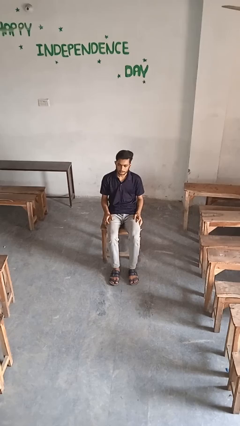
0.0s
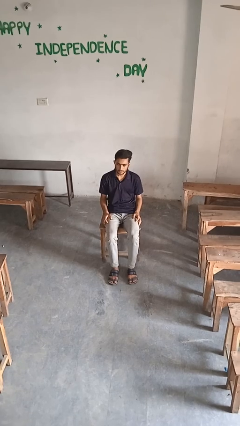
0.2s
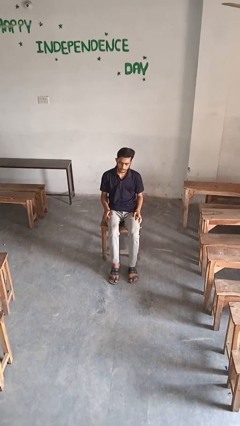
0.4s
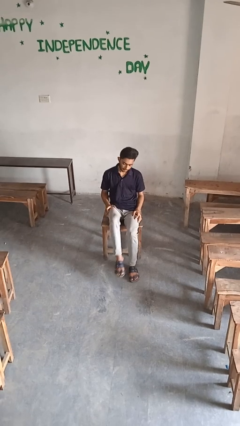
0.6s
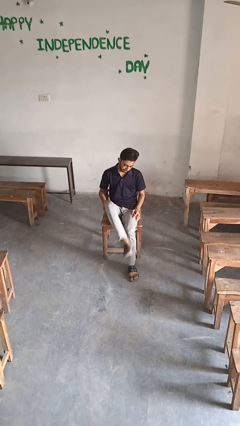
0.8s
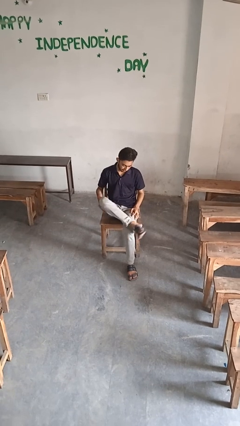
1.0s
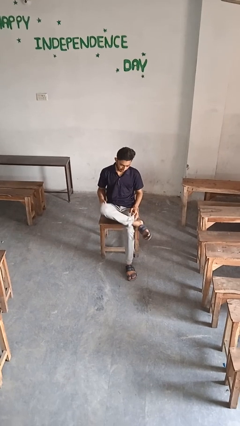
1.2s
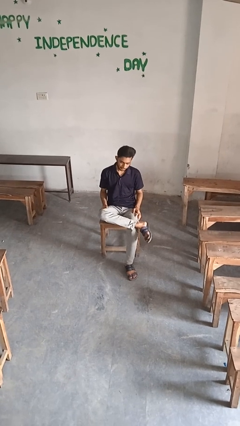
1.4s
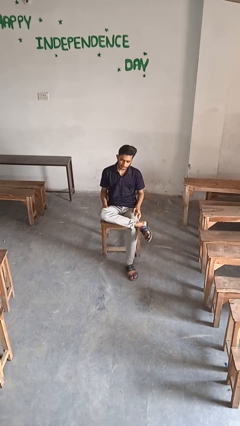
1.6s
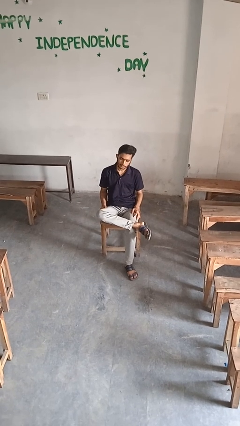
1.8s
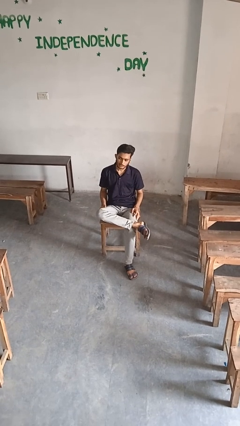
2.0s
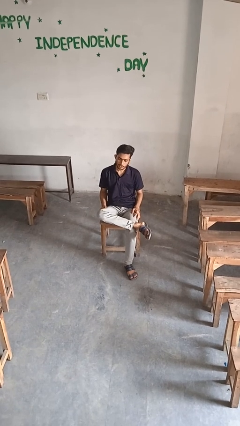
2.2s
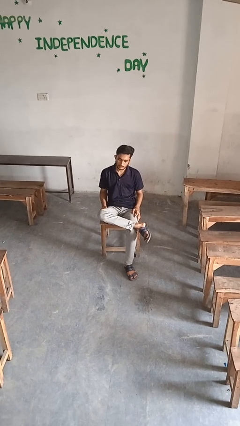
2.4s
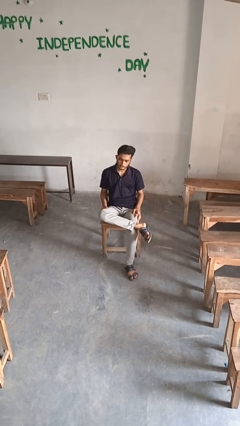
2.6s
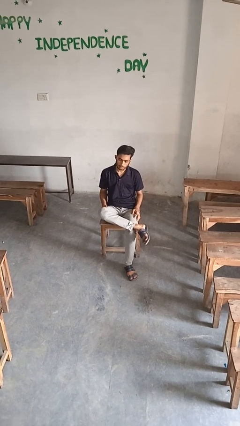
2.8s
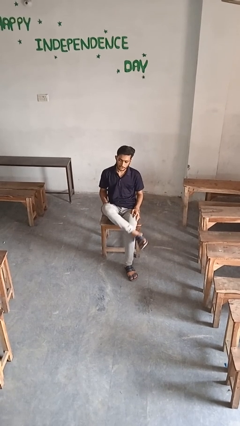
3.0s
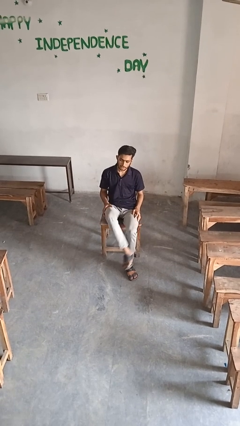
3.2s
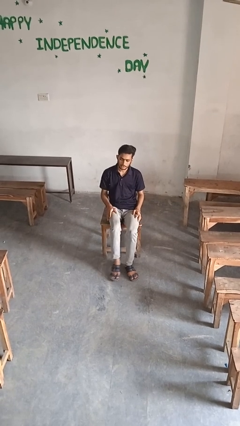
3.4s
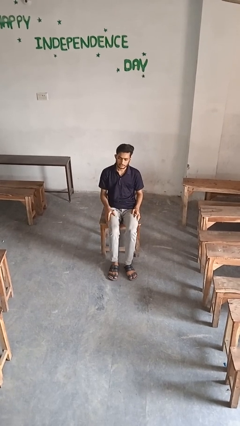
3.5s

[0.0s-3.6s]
person crosses legs

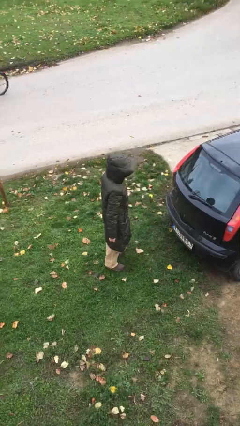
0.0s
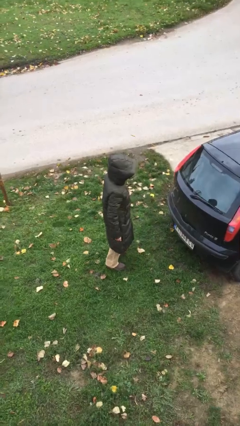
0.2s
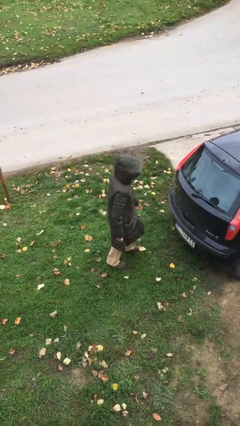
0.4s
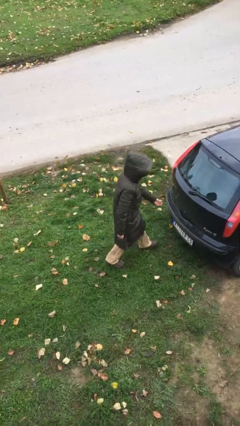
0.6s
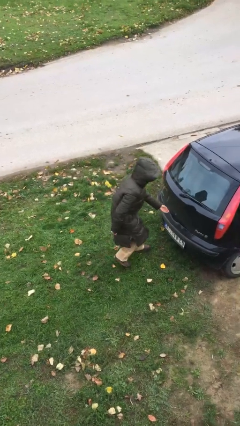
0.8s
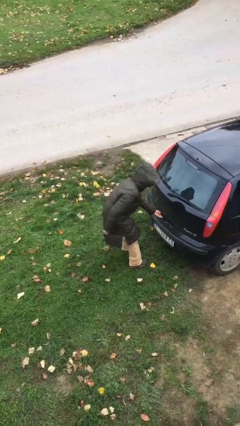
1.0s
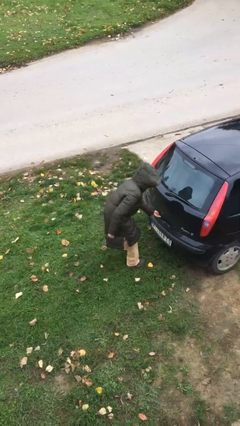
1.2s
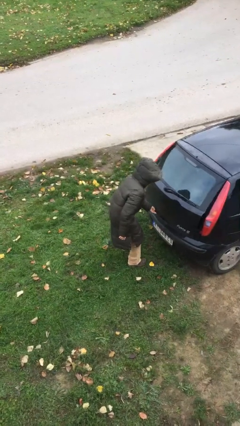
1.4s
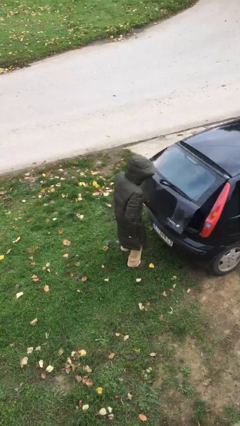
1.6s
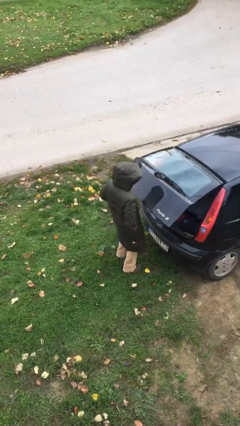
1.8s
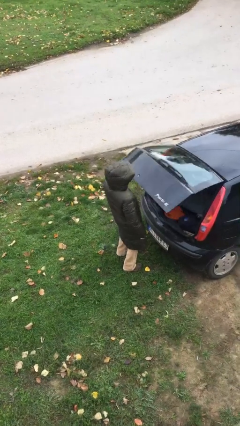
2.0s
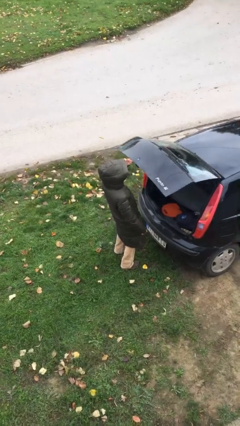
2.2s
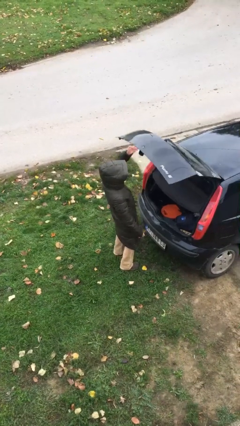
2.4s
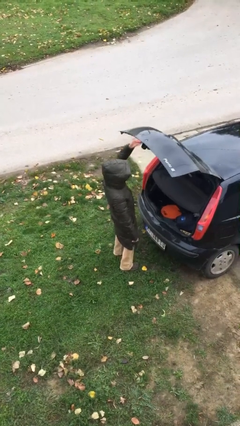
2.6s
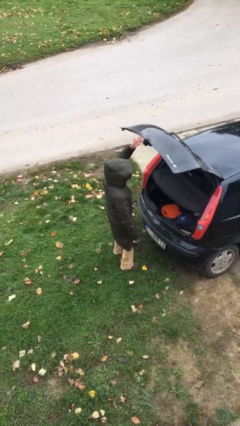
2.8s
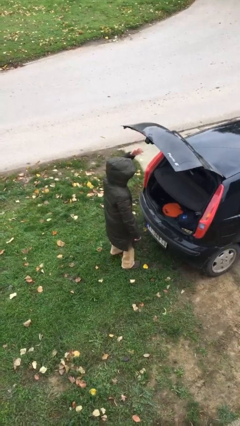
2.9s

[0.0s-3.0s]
person opens car trunk

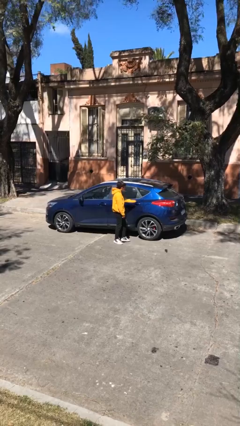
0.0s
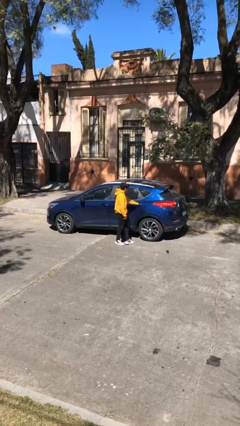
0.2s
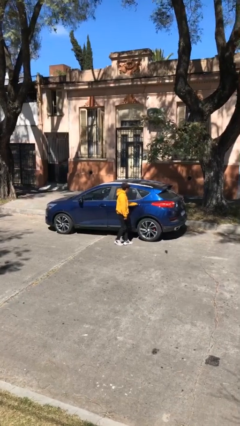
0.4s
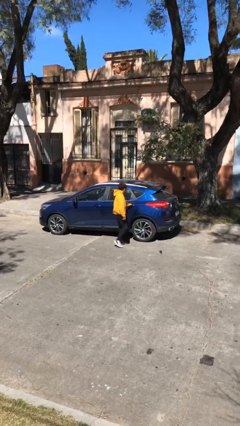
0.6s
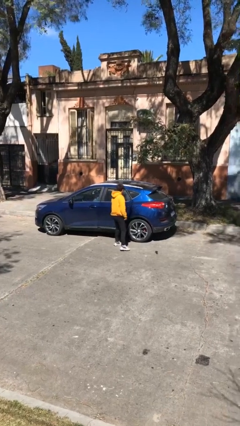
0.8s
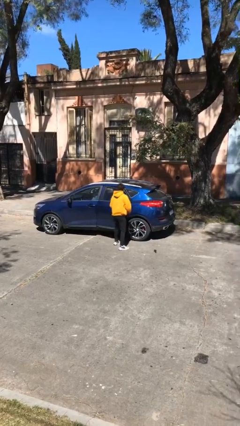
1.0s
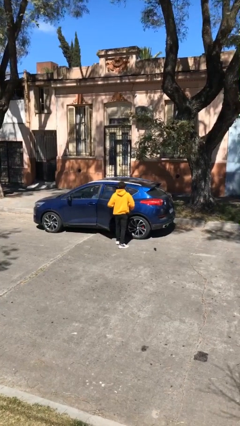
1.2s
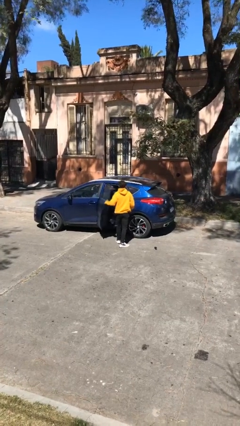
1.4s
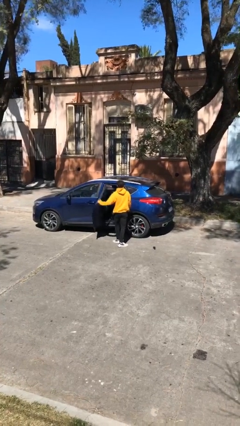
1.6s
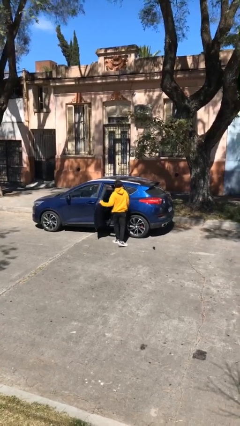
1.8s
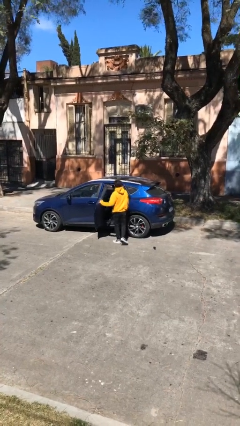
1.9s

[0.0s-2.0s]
person opens car door

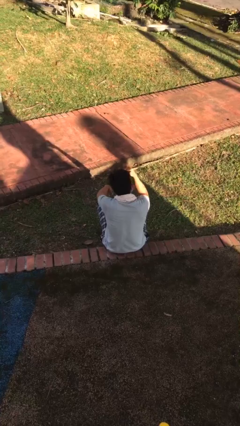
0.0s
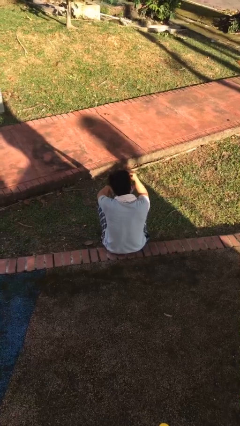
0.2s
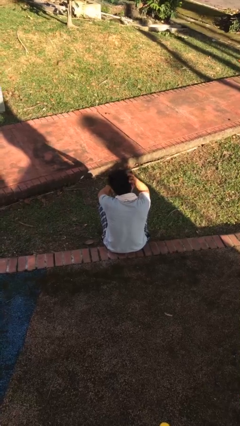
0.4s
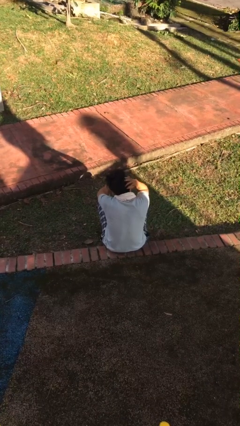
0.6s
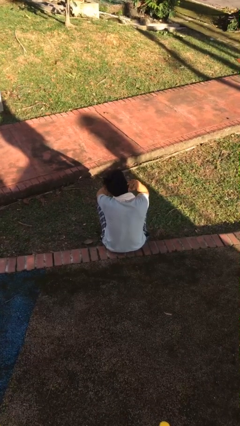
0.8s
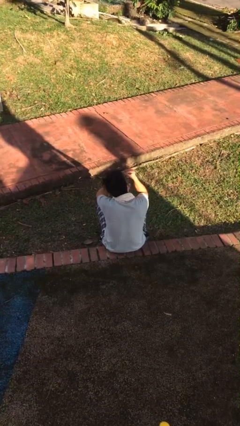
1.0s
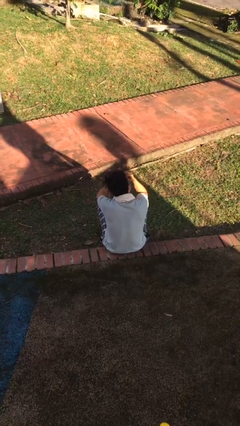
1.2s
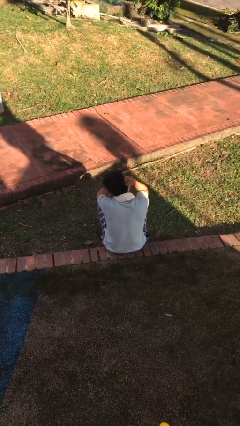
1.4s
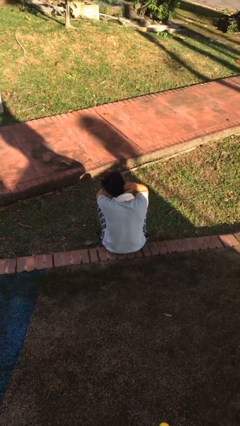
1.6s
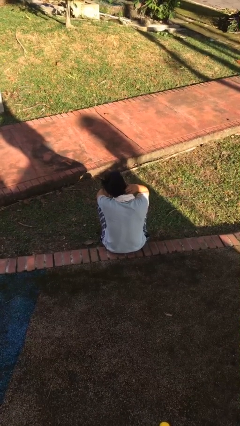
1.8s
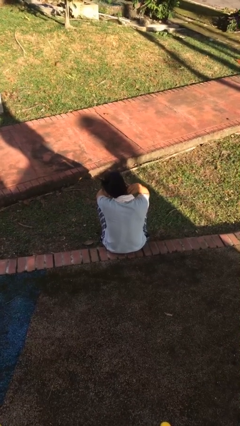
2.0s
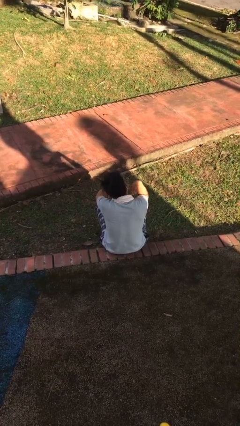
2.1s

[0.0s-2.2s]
person strokes hair

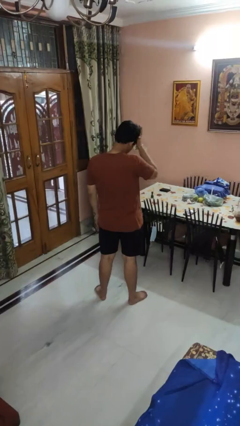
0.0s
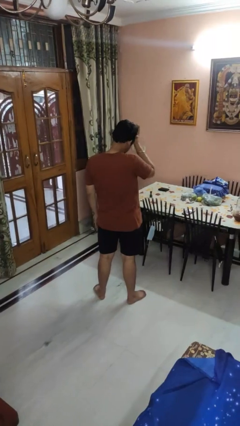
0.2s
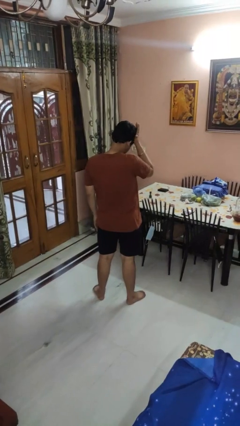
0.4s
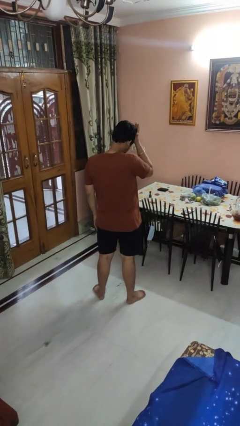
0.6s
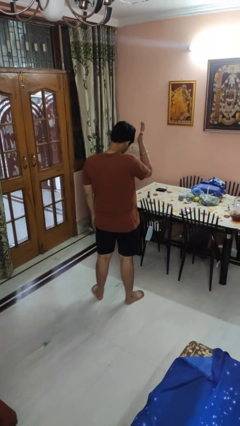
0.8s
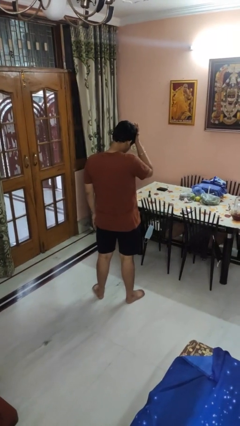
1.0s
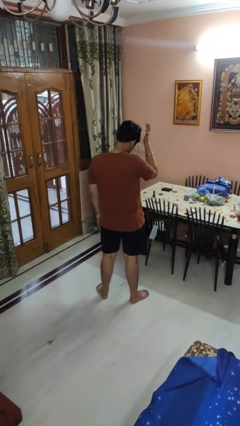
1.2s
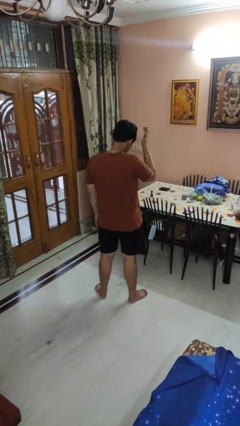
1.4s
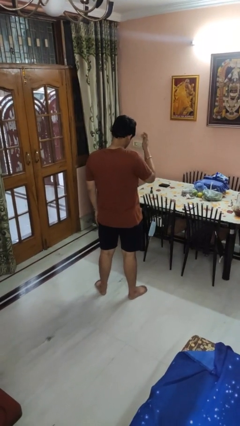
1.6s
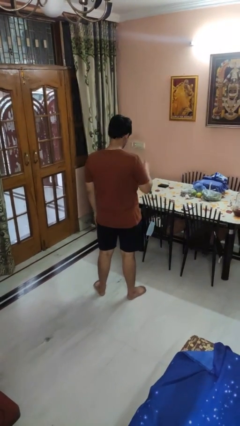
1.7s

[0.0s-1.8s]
person pats head

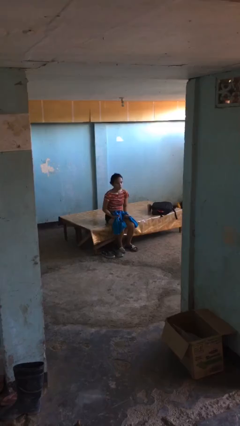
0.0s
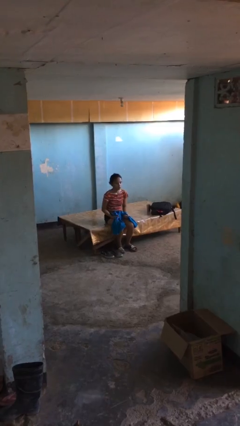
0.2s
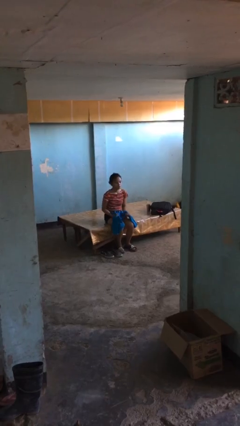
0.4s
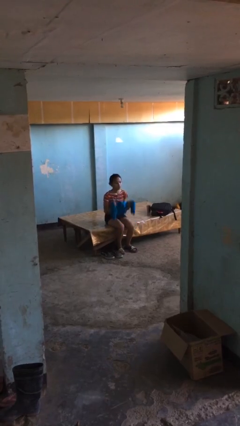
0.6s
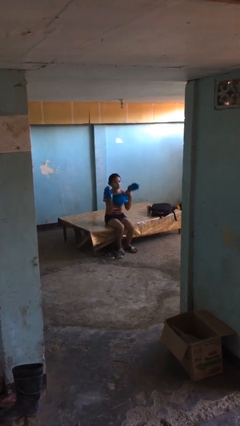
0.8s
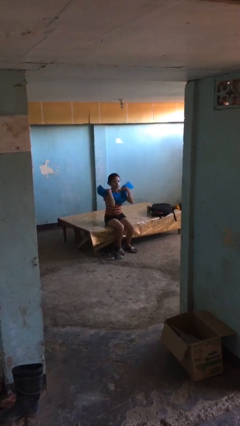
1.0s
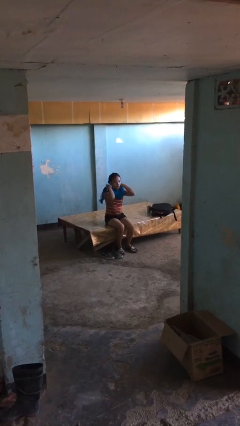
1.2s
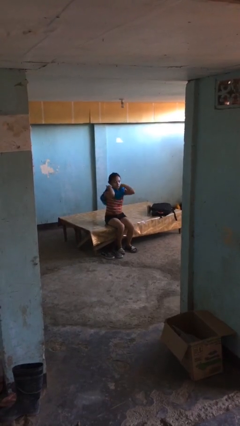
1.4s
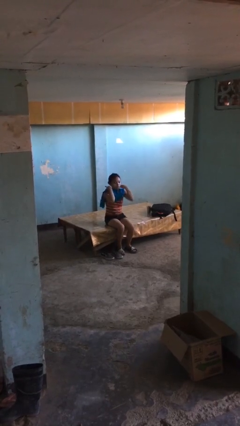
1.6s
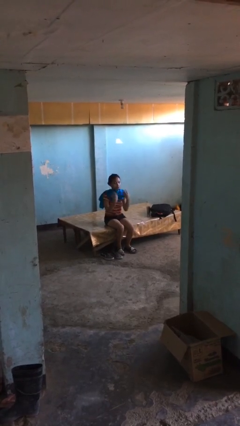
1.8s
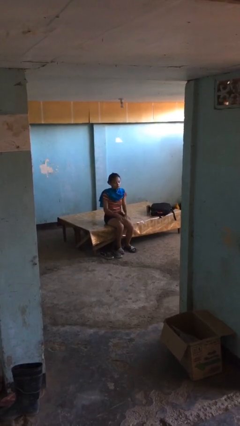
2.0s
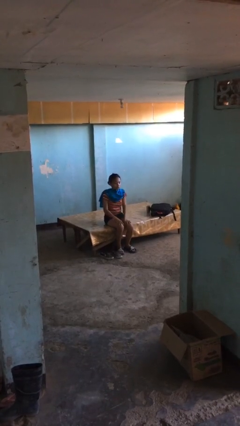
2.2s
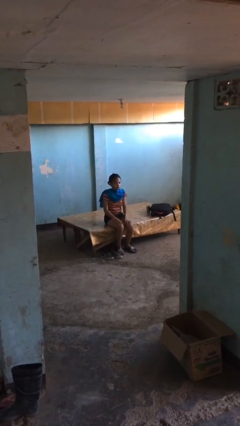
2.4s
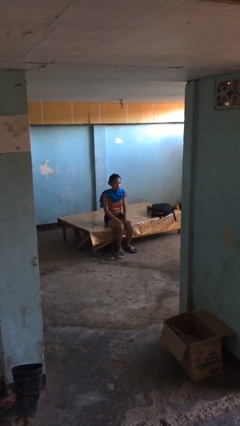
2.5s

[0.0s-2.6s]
person puts on scarf

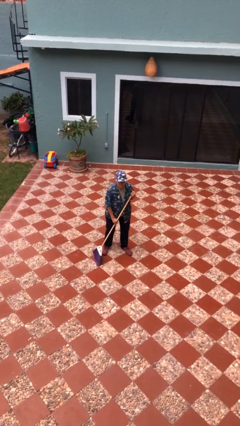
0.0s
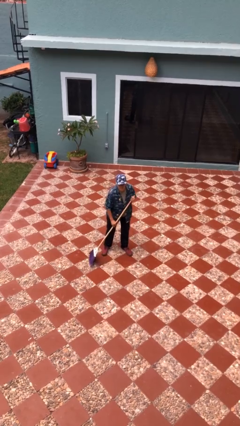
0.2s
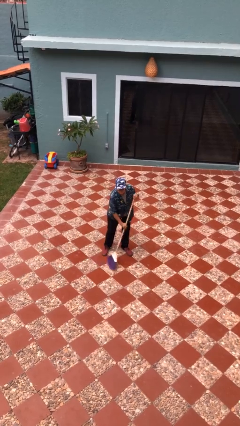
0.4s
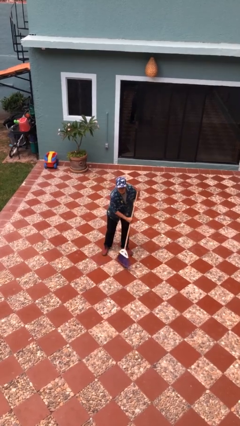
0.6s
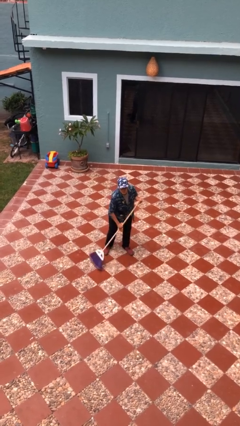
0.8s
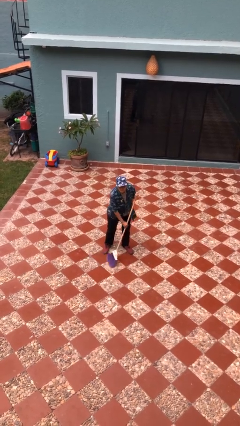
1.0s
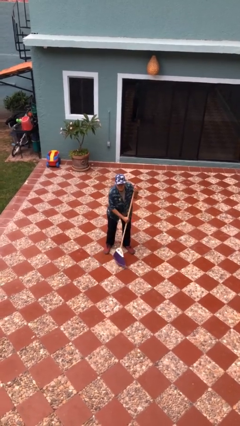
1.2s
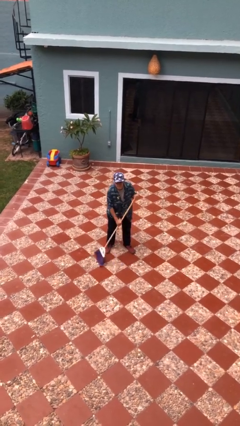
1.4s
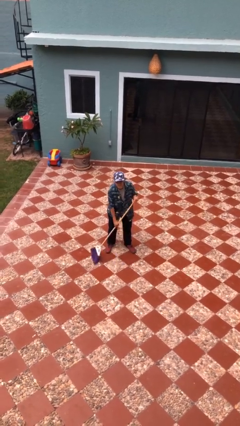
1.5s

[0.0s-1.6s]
person sweeps floor

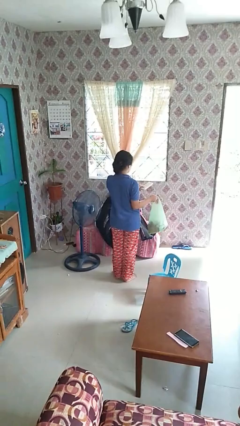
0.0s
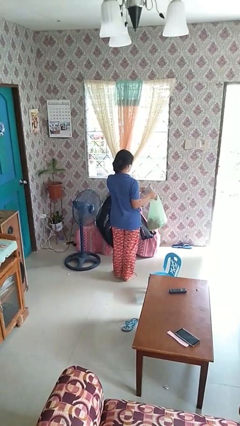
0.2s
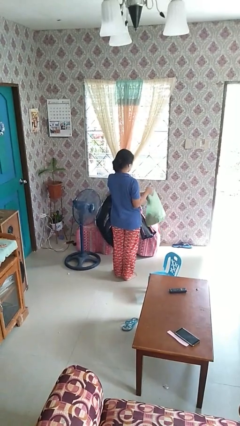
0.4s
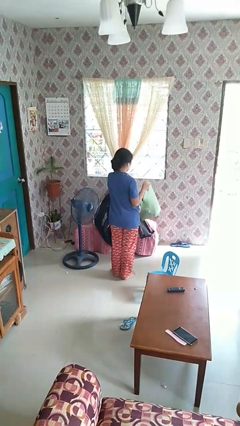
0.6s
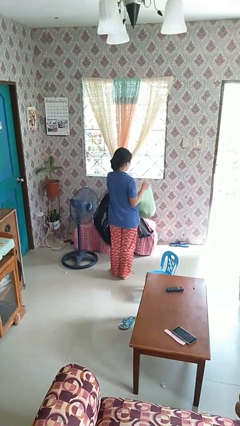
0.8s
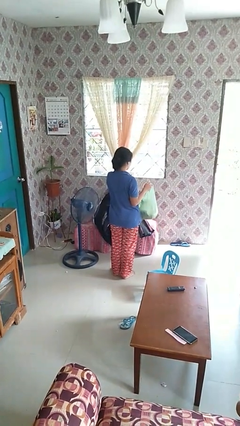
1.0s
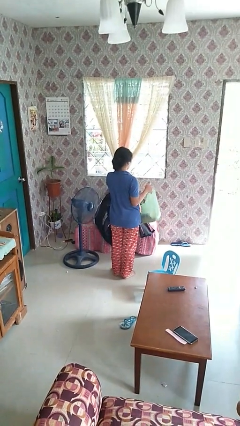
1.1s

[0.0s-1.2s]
person puts object into bag
